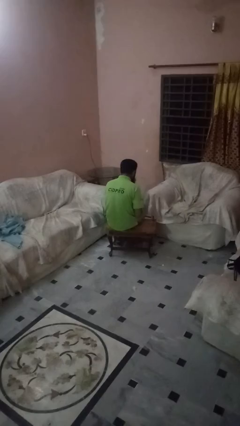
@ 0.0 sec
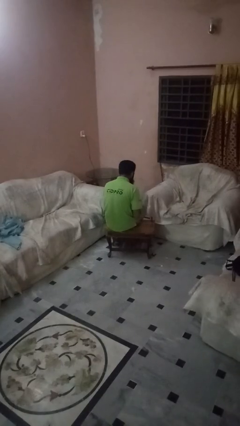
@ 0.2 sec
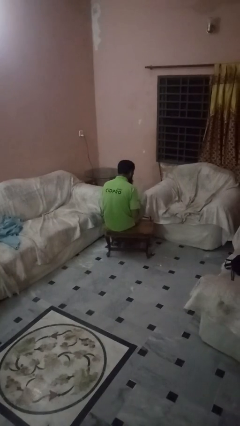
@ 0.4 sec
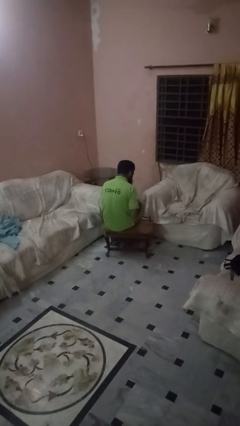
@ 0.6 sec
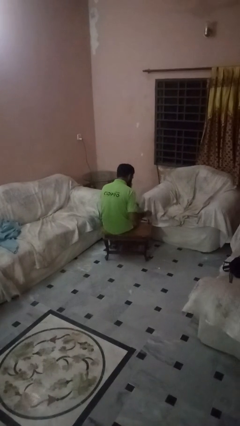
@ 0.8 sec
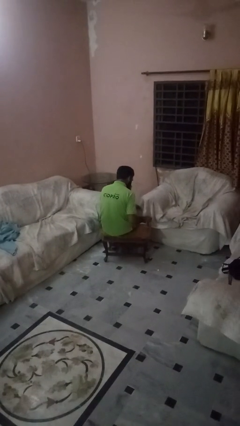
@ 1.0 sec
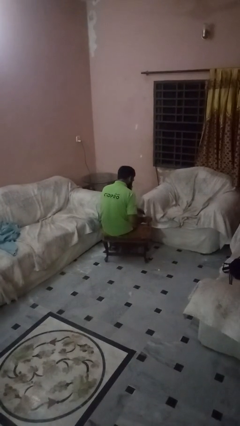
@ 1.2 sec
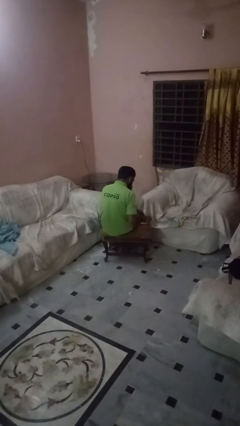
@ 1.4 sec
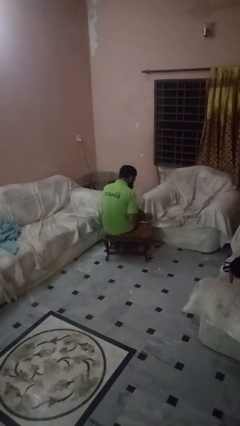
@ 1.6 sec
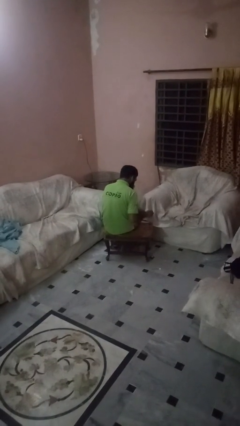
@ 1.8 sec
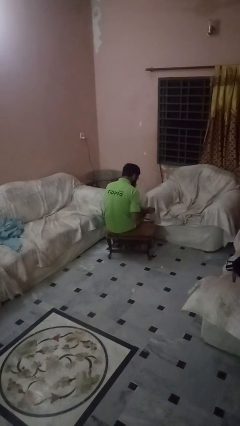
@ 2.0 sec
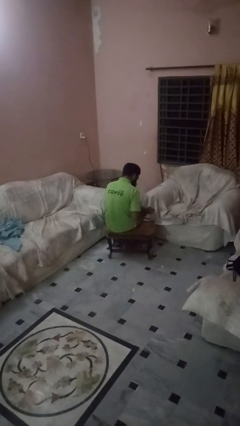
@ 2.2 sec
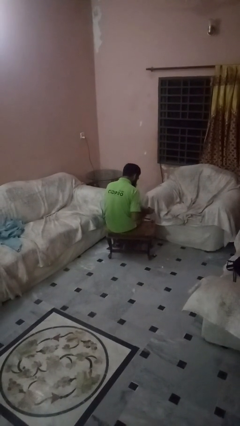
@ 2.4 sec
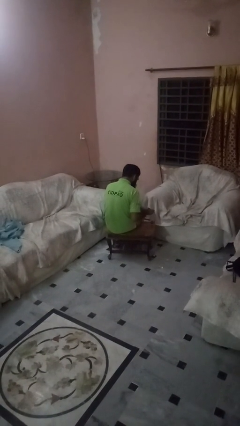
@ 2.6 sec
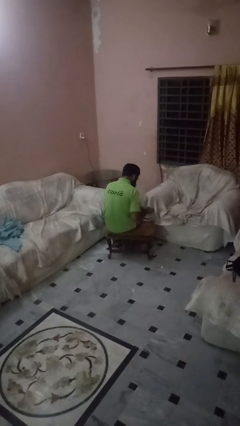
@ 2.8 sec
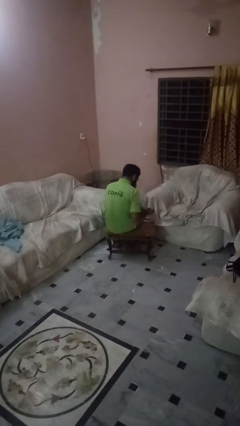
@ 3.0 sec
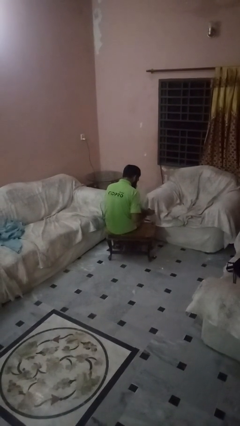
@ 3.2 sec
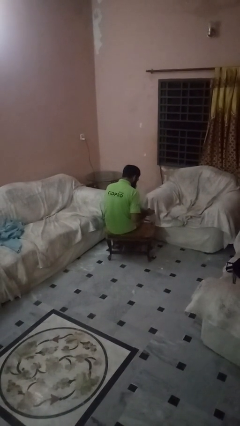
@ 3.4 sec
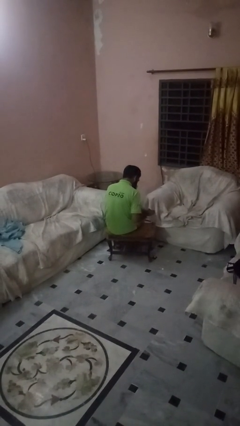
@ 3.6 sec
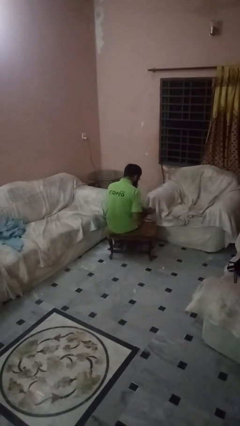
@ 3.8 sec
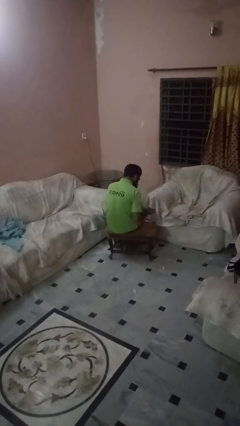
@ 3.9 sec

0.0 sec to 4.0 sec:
person paints fingernails

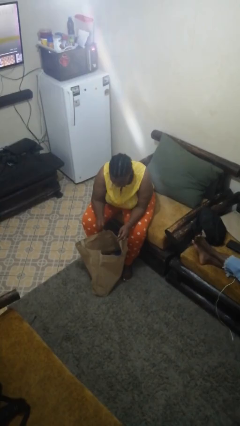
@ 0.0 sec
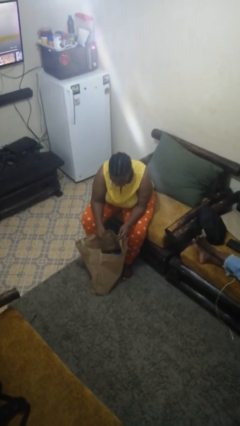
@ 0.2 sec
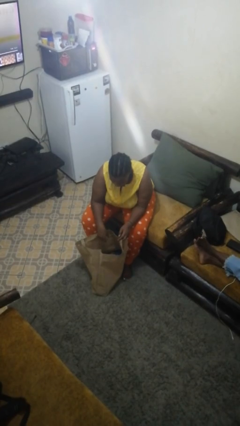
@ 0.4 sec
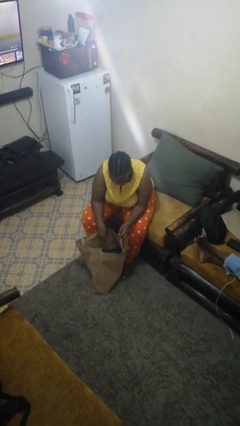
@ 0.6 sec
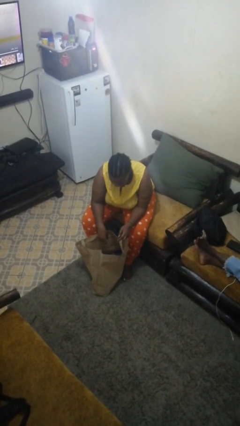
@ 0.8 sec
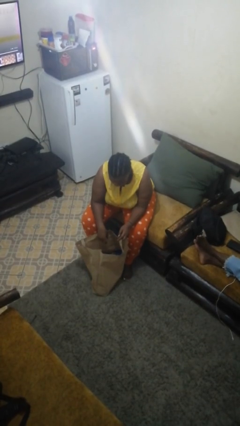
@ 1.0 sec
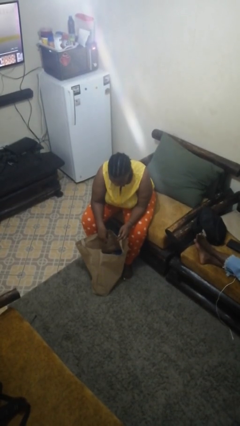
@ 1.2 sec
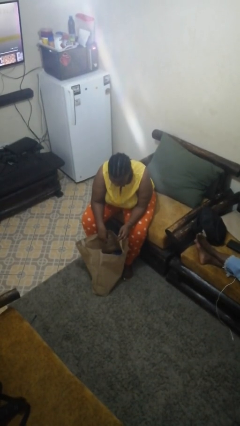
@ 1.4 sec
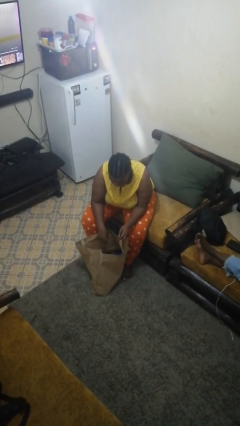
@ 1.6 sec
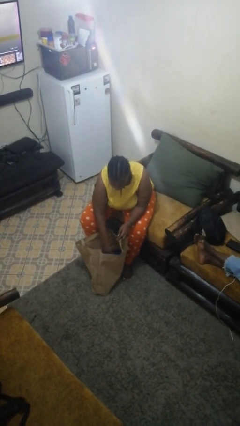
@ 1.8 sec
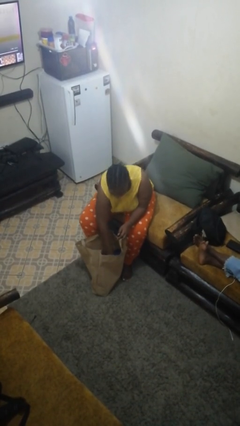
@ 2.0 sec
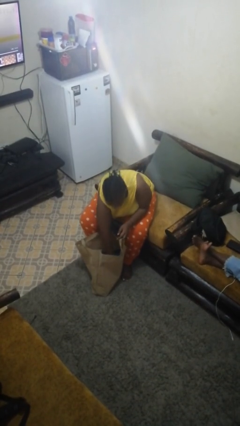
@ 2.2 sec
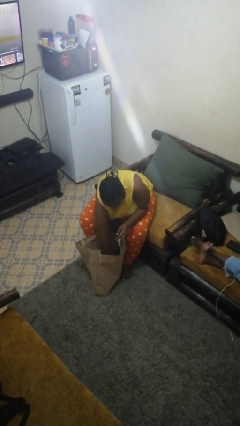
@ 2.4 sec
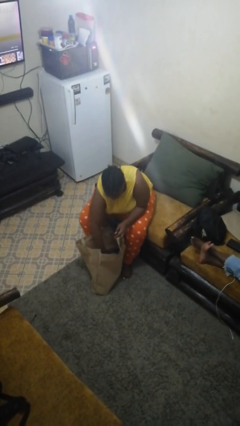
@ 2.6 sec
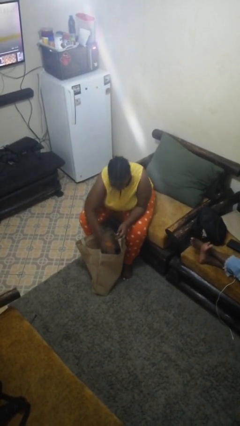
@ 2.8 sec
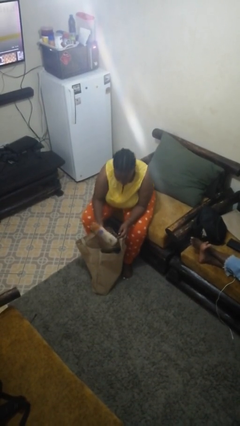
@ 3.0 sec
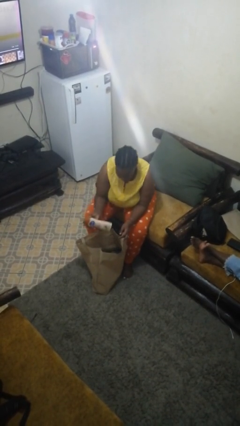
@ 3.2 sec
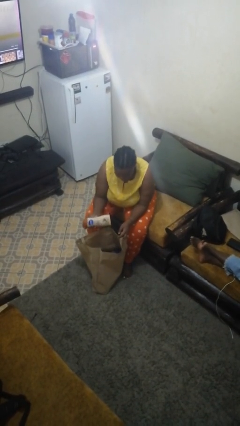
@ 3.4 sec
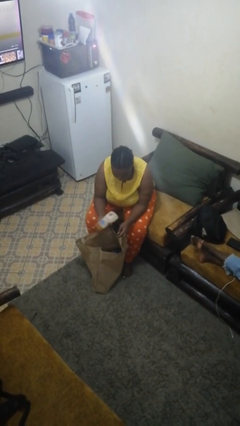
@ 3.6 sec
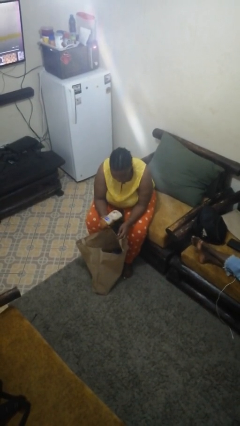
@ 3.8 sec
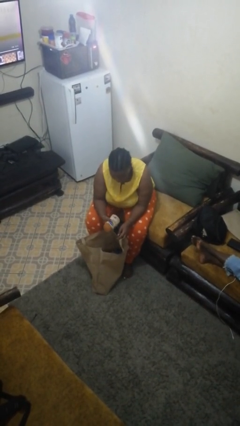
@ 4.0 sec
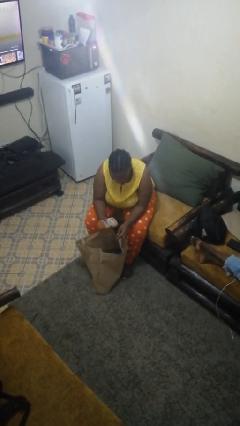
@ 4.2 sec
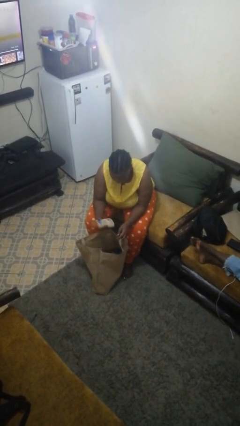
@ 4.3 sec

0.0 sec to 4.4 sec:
person takes object from bag

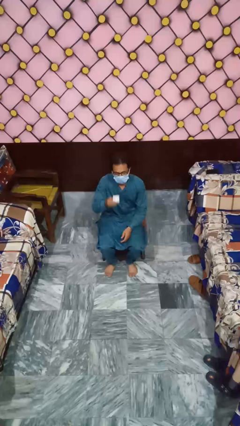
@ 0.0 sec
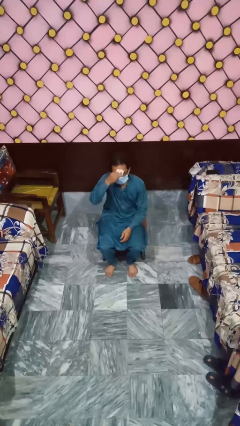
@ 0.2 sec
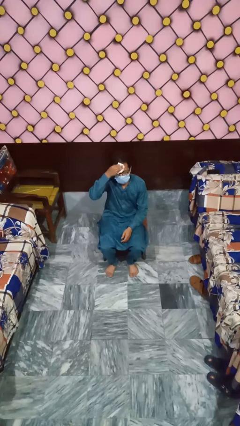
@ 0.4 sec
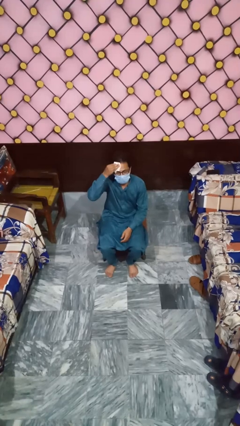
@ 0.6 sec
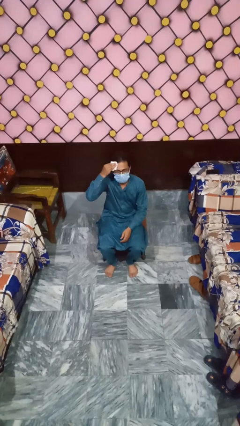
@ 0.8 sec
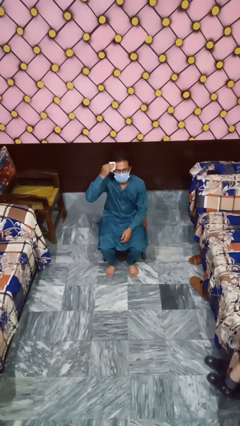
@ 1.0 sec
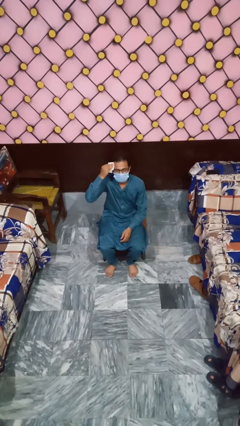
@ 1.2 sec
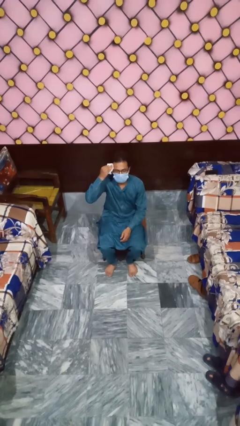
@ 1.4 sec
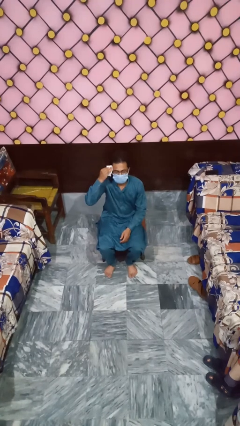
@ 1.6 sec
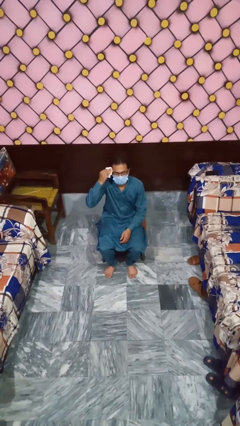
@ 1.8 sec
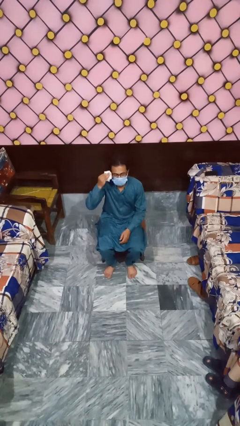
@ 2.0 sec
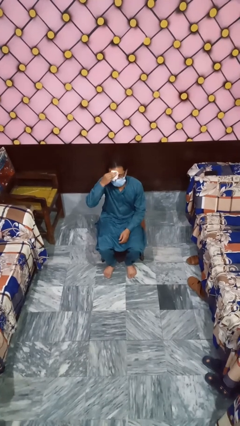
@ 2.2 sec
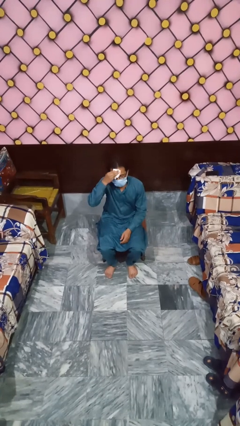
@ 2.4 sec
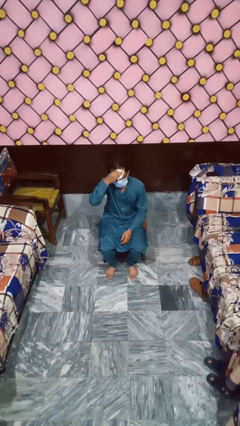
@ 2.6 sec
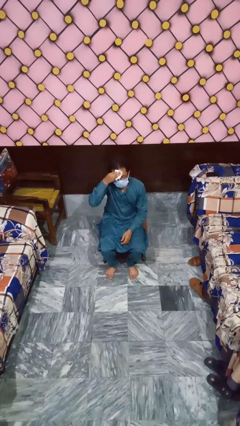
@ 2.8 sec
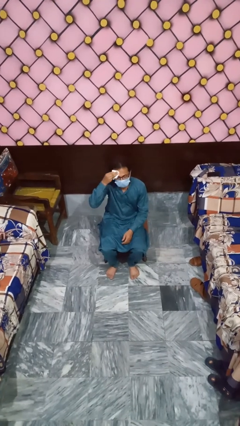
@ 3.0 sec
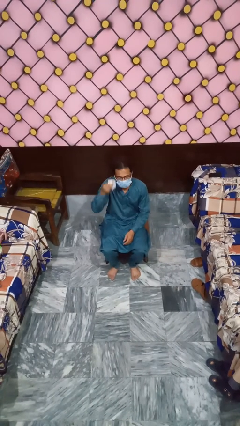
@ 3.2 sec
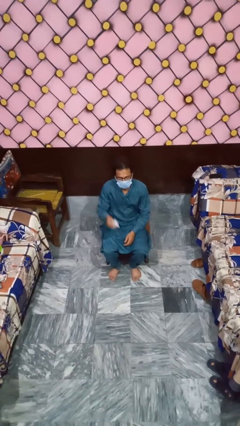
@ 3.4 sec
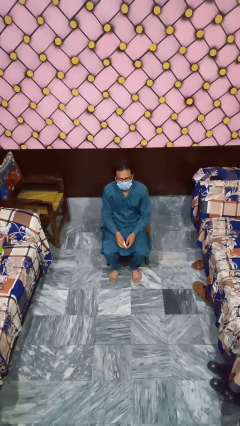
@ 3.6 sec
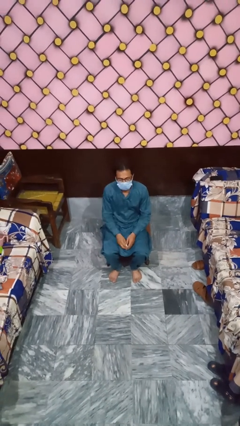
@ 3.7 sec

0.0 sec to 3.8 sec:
person wipes mouth with napkin

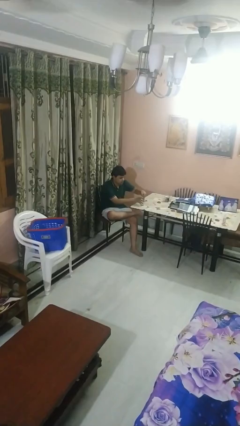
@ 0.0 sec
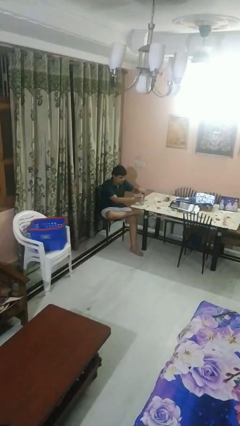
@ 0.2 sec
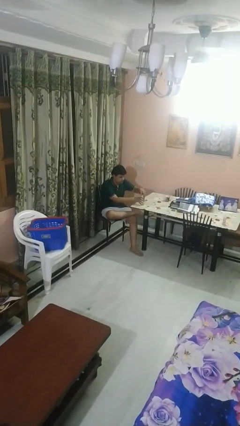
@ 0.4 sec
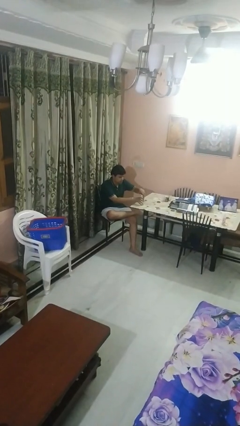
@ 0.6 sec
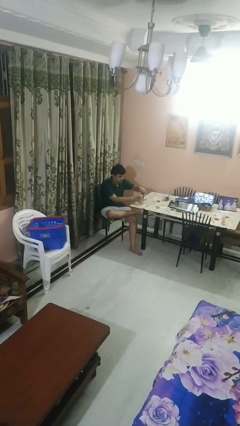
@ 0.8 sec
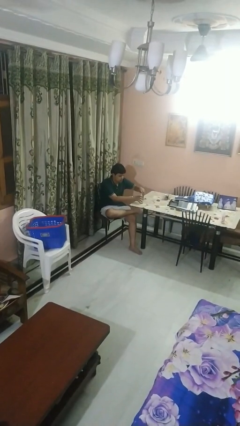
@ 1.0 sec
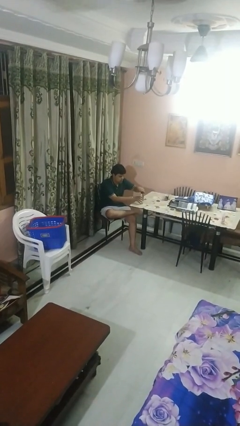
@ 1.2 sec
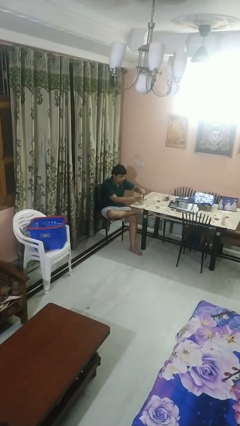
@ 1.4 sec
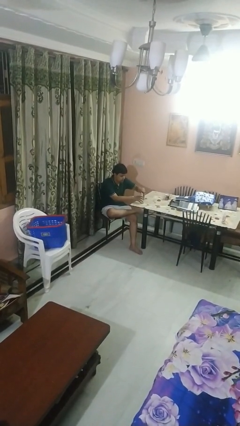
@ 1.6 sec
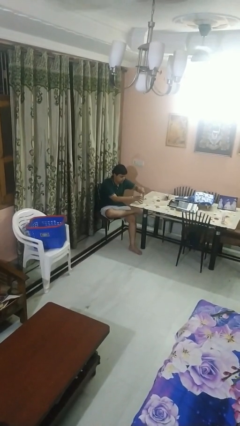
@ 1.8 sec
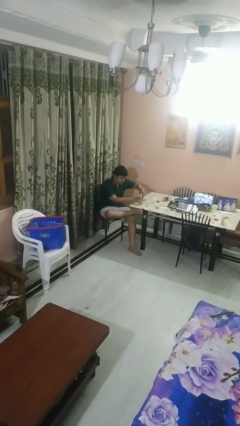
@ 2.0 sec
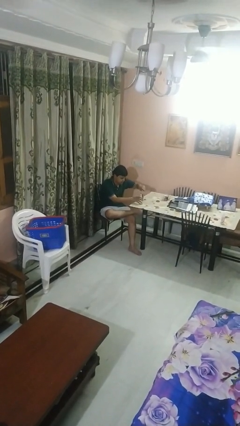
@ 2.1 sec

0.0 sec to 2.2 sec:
person unscrews lid from bottle

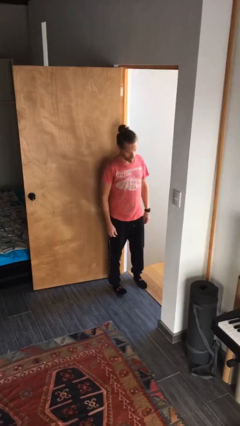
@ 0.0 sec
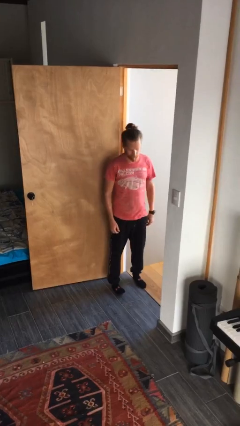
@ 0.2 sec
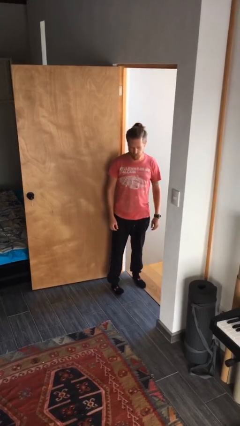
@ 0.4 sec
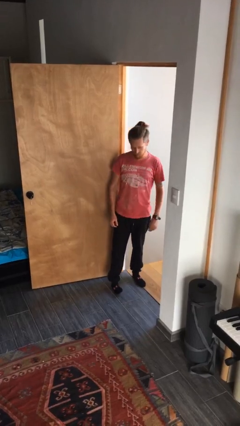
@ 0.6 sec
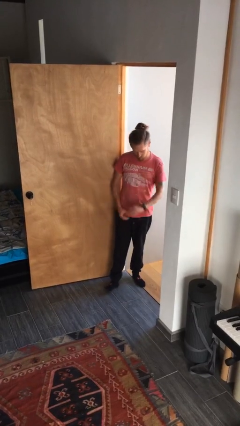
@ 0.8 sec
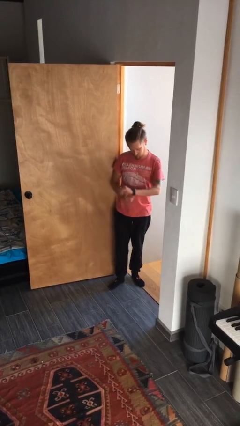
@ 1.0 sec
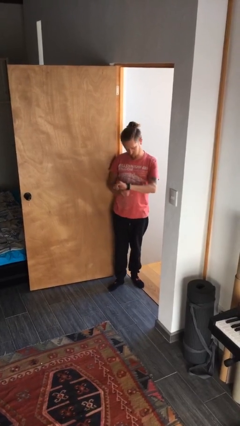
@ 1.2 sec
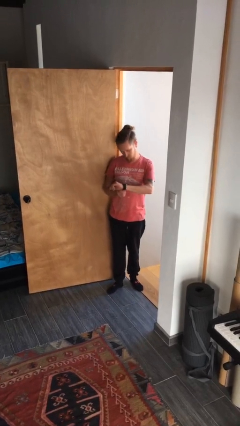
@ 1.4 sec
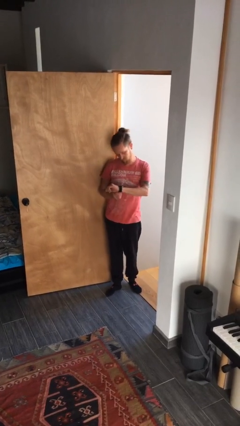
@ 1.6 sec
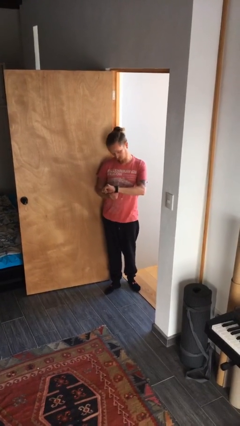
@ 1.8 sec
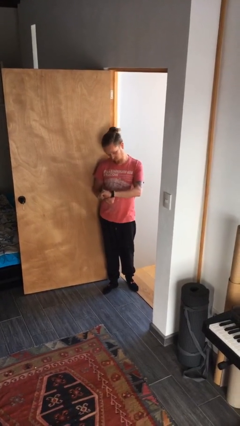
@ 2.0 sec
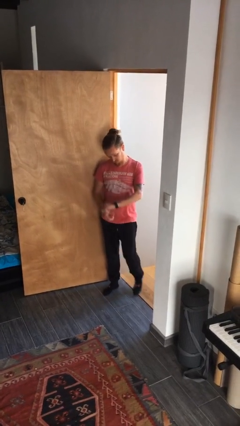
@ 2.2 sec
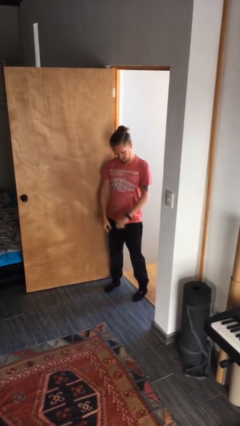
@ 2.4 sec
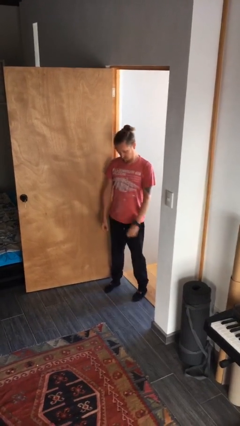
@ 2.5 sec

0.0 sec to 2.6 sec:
person looks at wristwatch

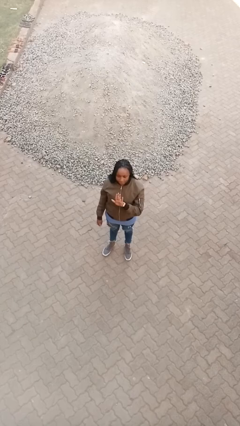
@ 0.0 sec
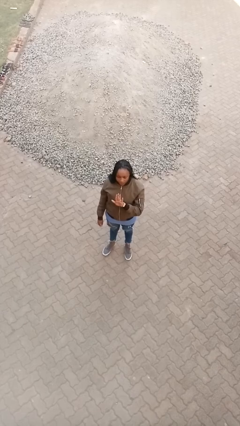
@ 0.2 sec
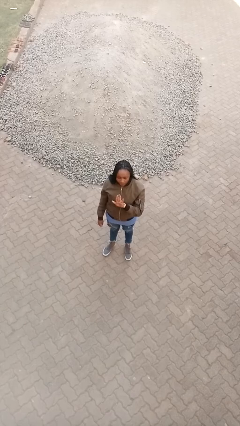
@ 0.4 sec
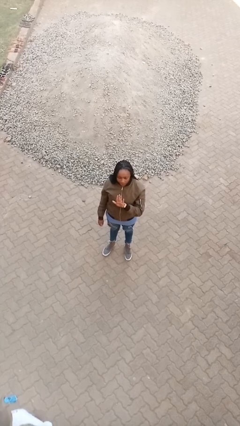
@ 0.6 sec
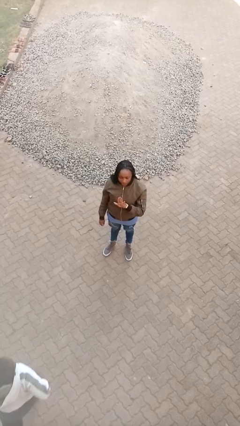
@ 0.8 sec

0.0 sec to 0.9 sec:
person gestures stop
